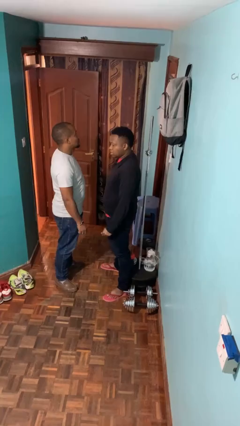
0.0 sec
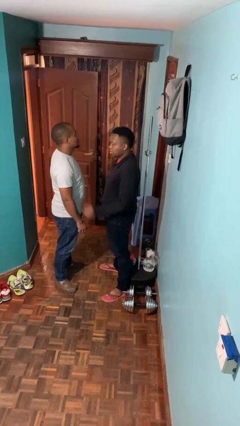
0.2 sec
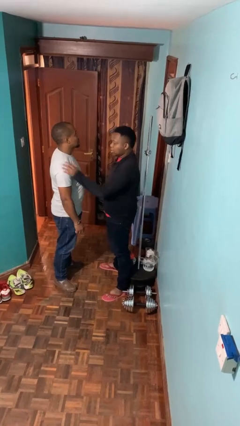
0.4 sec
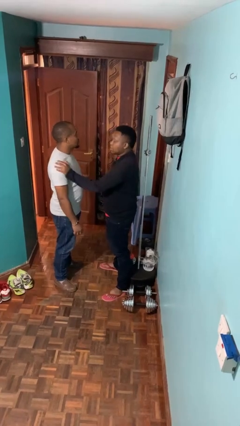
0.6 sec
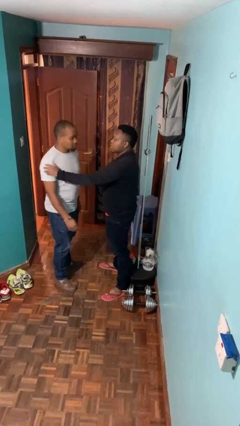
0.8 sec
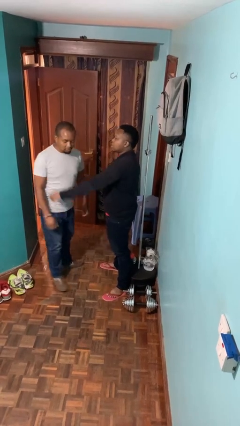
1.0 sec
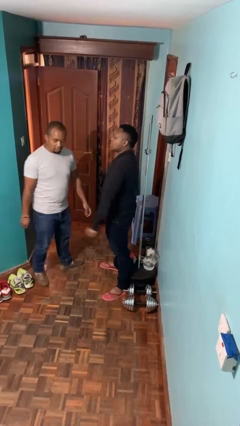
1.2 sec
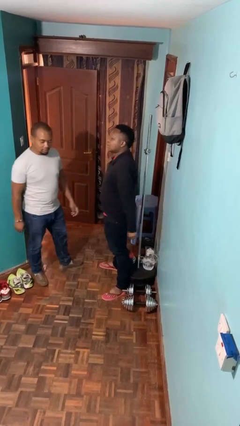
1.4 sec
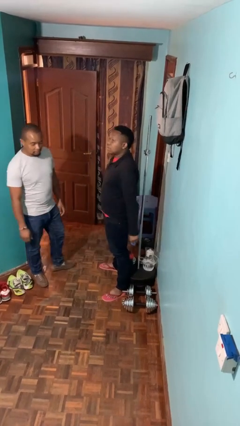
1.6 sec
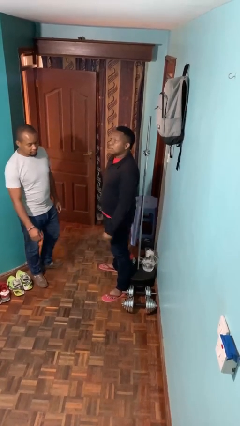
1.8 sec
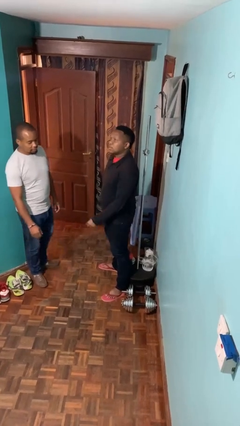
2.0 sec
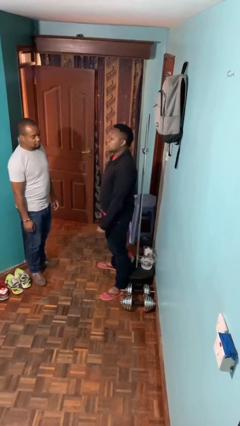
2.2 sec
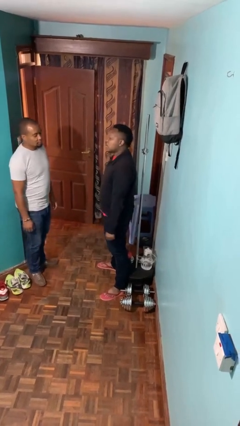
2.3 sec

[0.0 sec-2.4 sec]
person shoves person

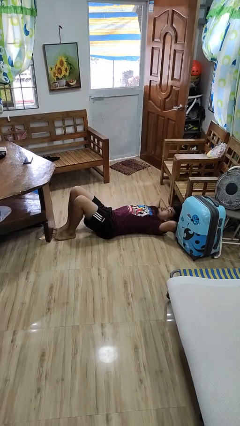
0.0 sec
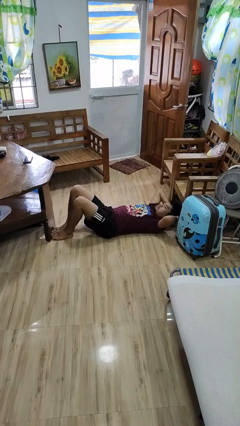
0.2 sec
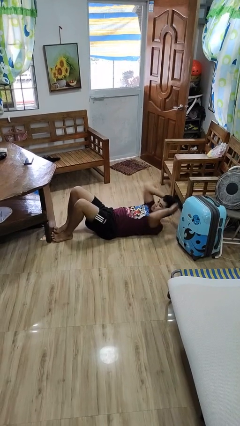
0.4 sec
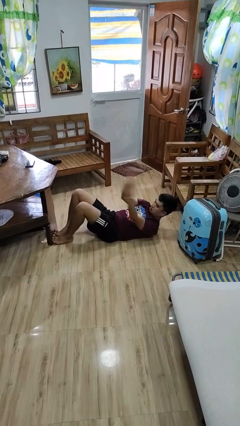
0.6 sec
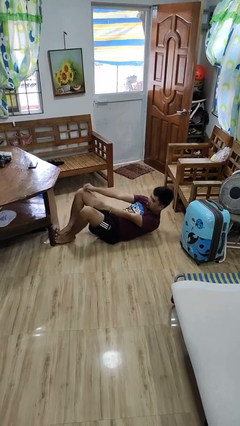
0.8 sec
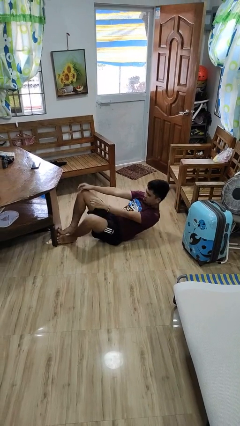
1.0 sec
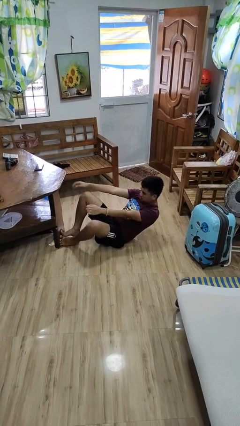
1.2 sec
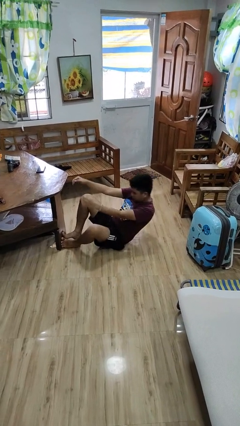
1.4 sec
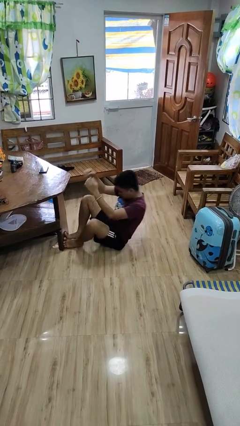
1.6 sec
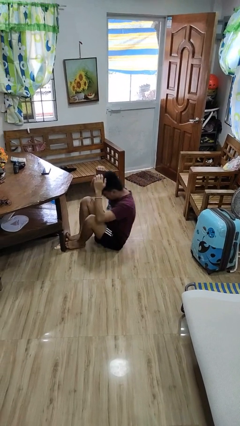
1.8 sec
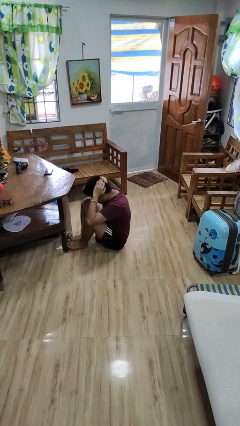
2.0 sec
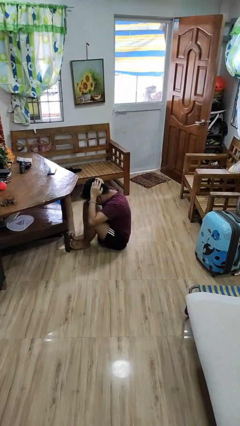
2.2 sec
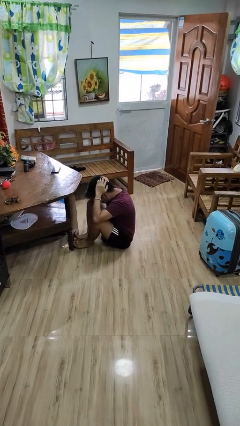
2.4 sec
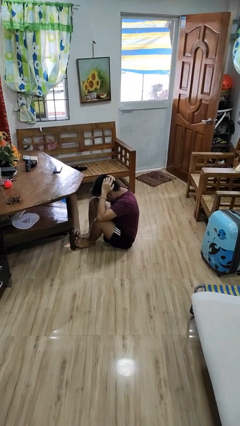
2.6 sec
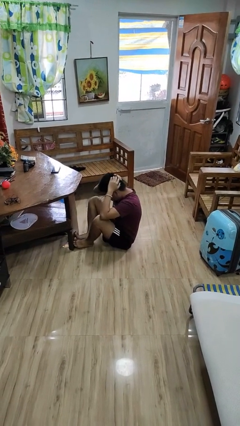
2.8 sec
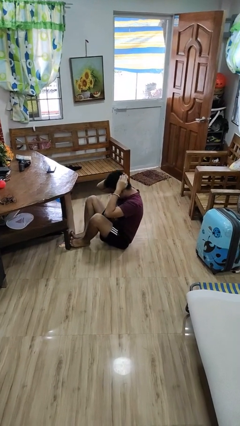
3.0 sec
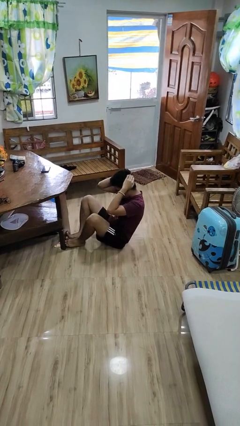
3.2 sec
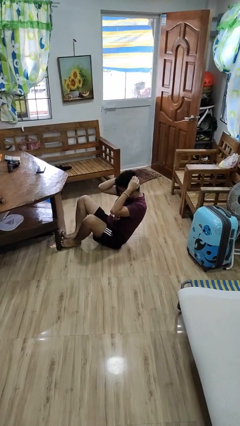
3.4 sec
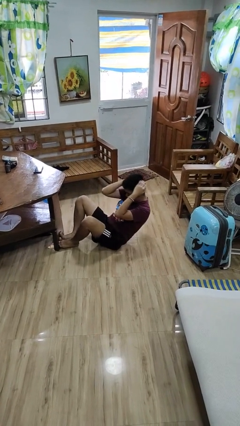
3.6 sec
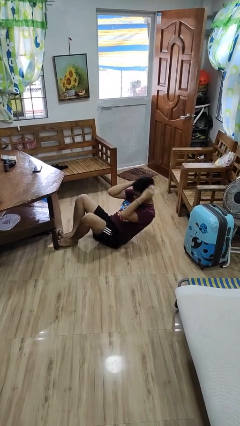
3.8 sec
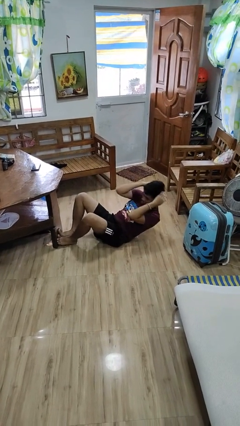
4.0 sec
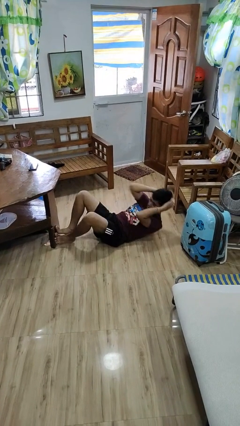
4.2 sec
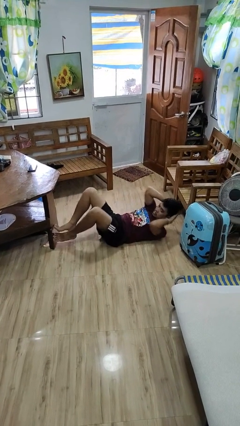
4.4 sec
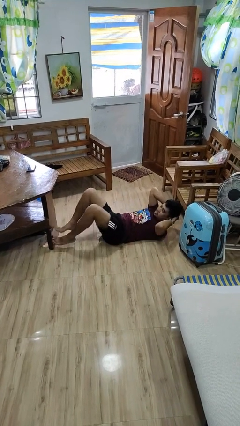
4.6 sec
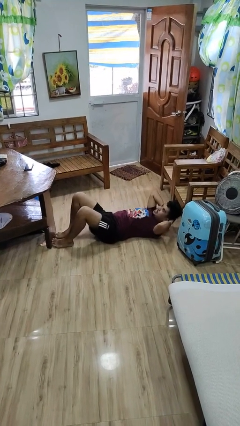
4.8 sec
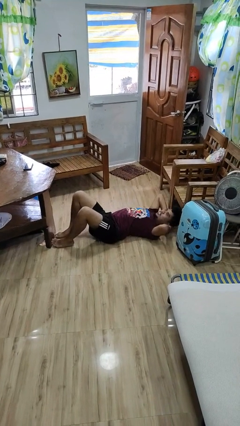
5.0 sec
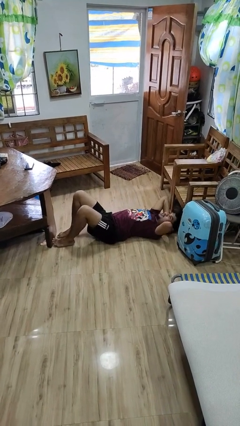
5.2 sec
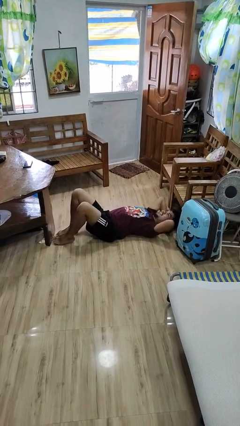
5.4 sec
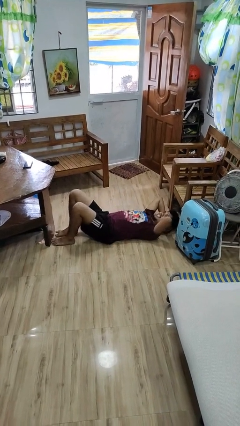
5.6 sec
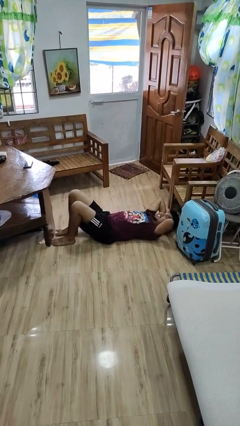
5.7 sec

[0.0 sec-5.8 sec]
person exercises with situp

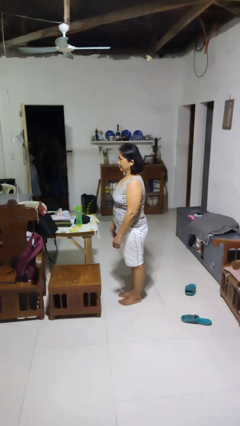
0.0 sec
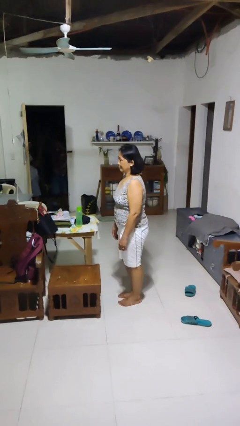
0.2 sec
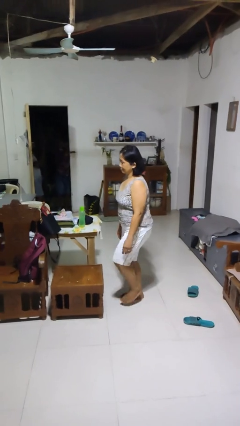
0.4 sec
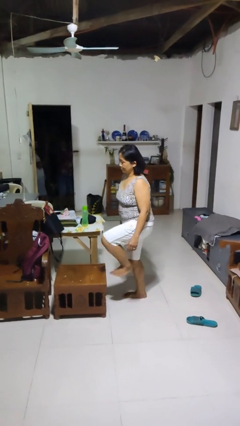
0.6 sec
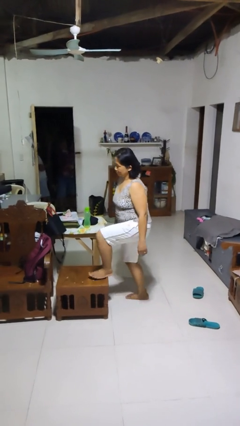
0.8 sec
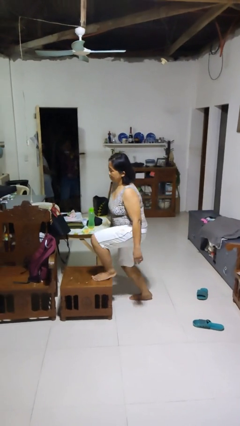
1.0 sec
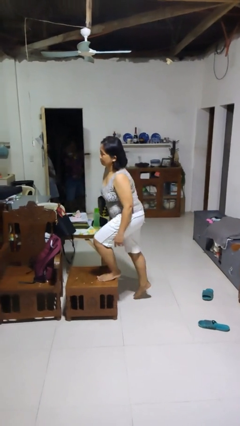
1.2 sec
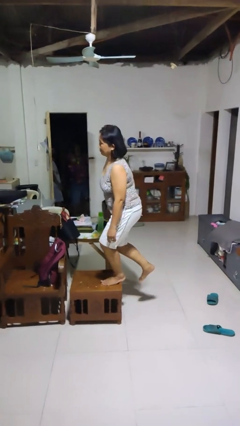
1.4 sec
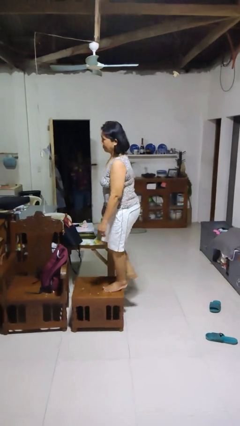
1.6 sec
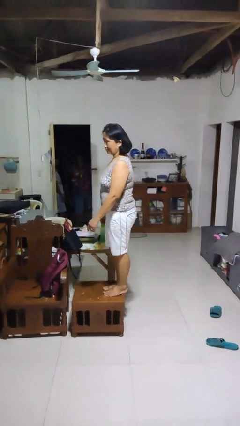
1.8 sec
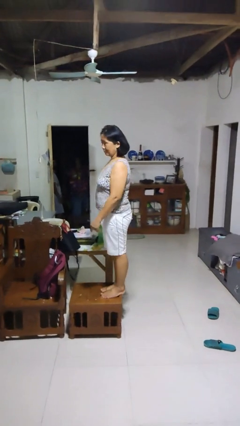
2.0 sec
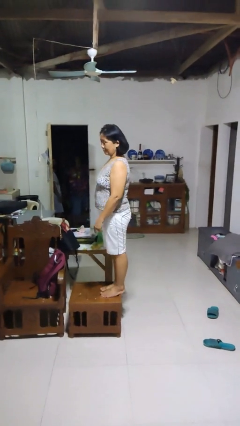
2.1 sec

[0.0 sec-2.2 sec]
person climbs on chair

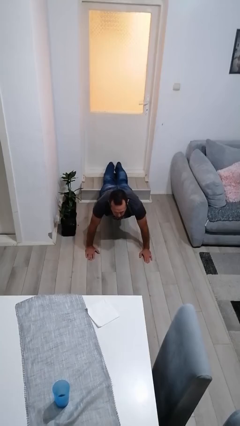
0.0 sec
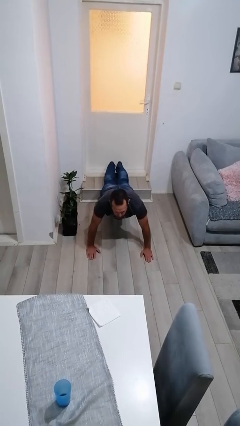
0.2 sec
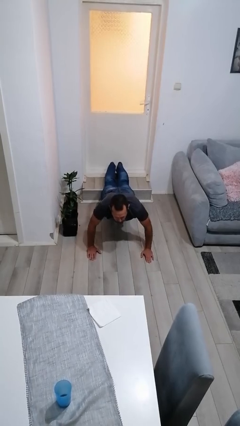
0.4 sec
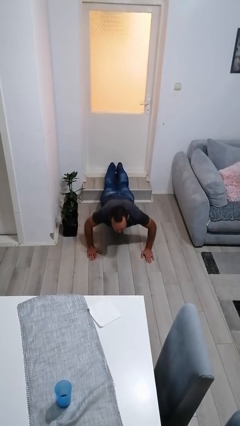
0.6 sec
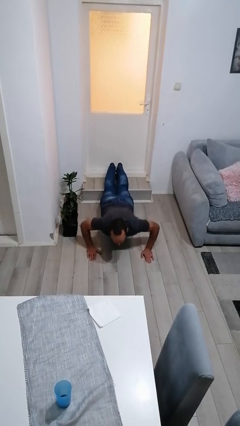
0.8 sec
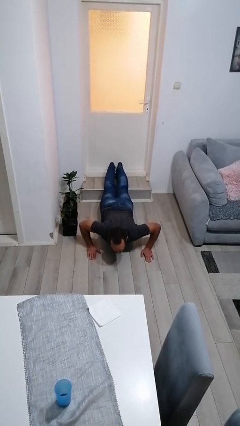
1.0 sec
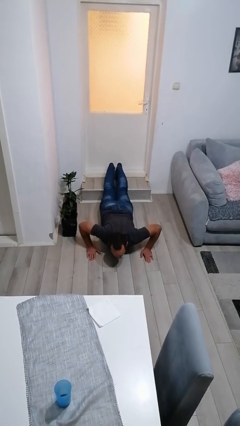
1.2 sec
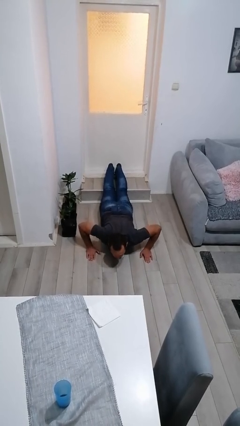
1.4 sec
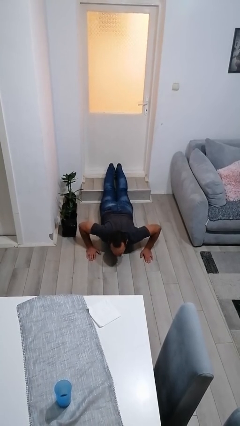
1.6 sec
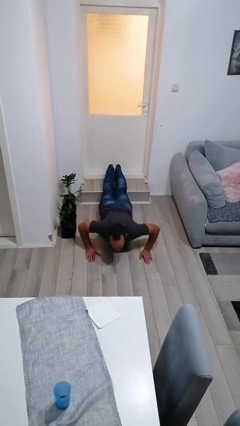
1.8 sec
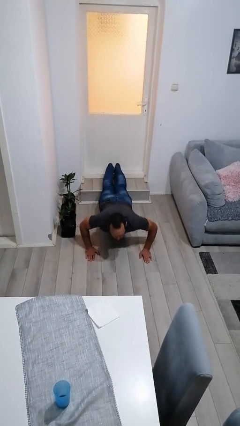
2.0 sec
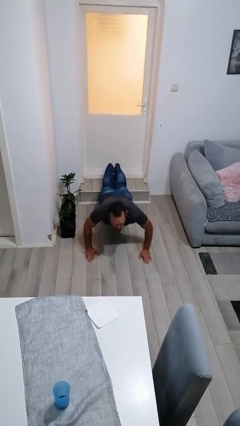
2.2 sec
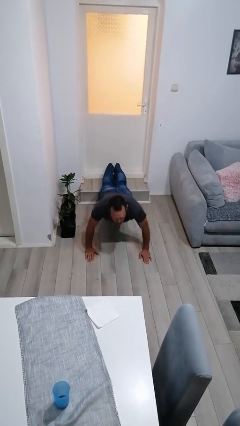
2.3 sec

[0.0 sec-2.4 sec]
person exercises with pushup

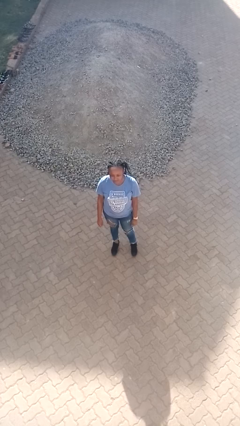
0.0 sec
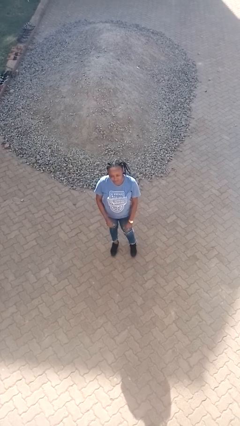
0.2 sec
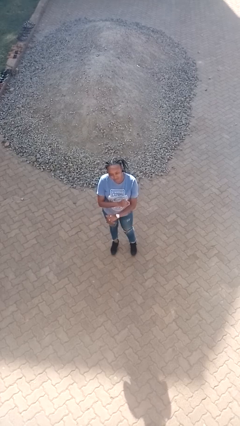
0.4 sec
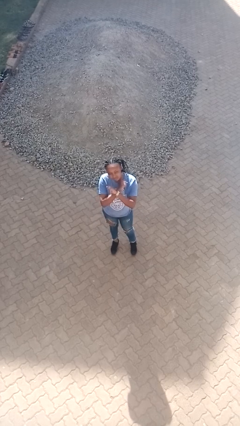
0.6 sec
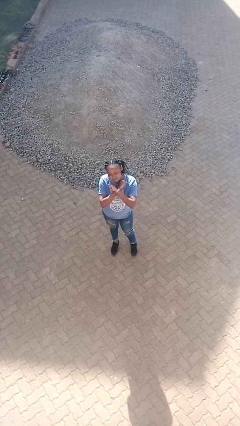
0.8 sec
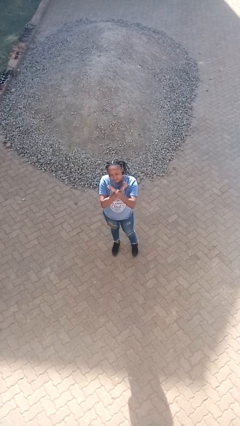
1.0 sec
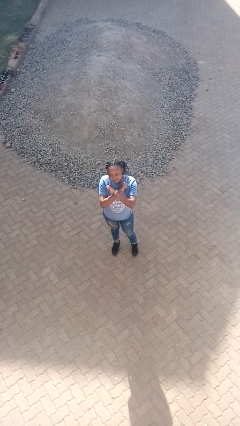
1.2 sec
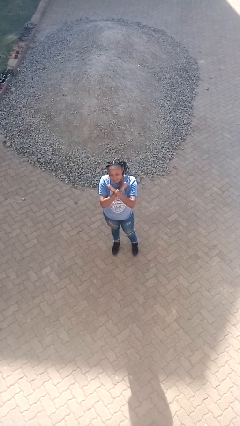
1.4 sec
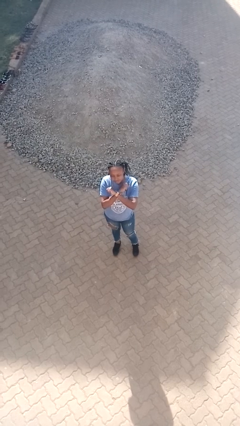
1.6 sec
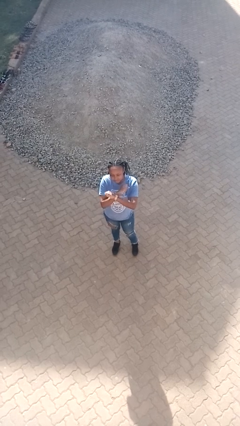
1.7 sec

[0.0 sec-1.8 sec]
person gestures arms x

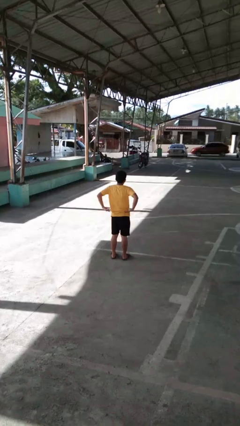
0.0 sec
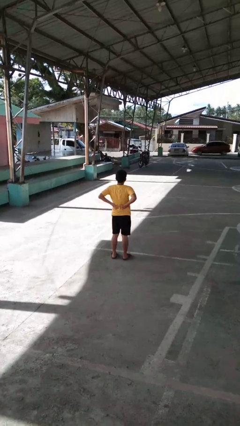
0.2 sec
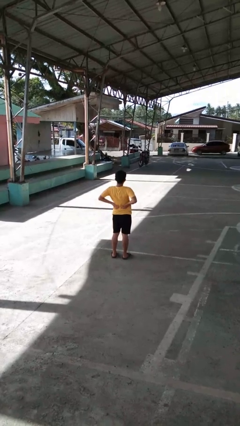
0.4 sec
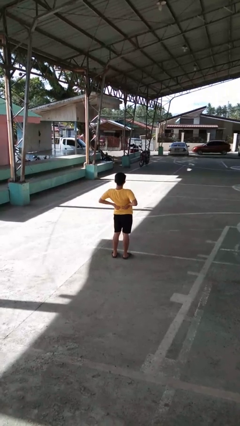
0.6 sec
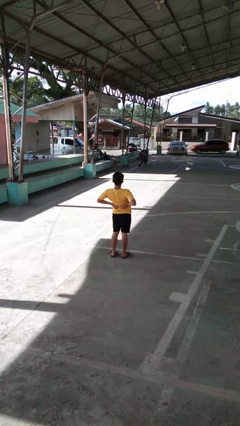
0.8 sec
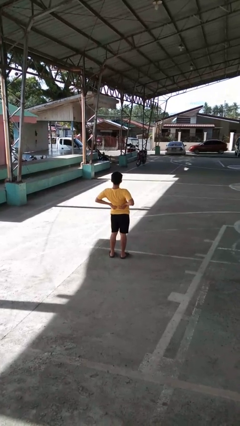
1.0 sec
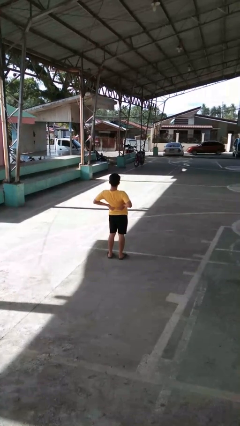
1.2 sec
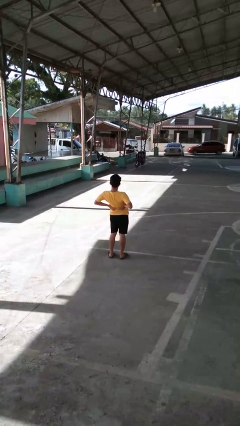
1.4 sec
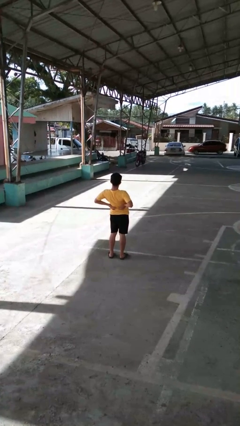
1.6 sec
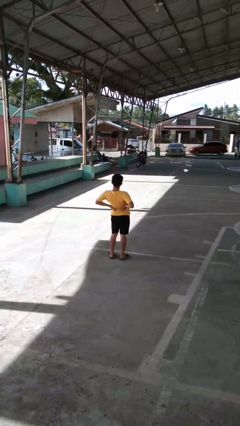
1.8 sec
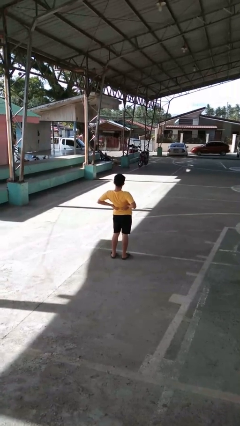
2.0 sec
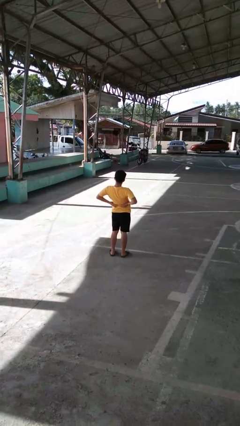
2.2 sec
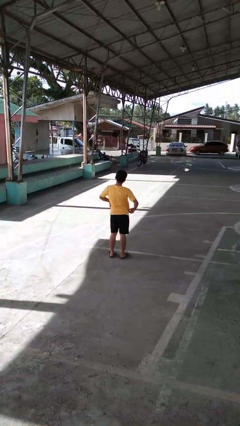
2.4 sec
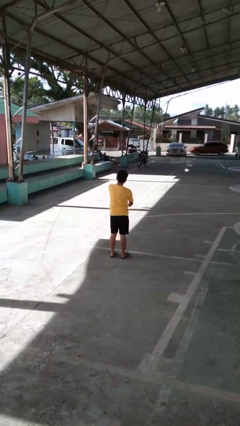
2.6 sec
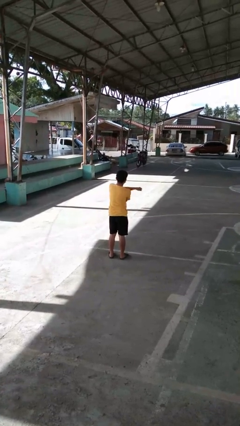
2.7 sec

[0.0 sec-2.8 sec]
person stretches back

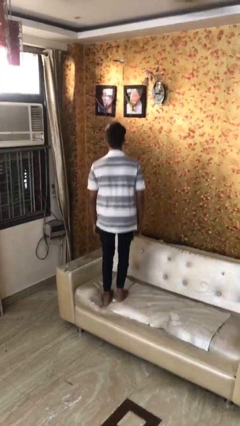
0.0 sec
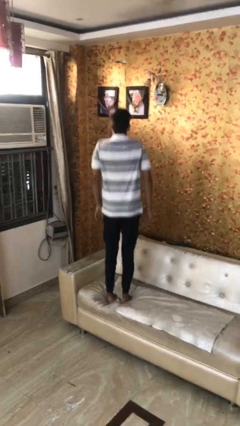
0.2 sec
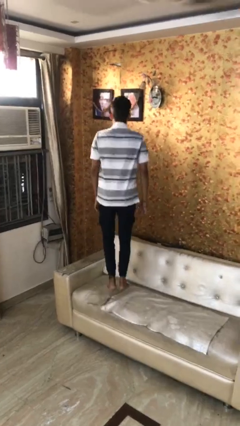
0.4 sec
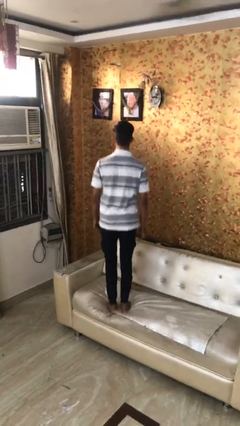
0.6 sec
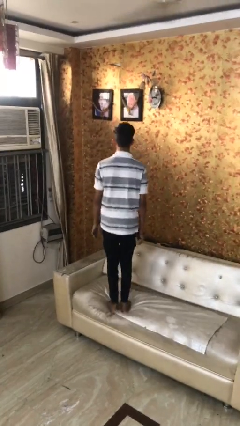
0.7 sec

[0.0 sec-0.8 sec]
person jumps on bed
